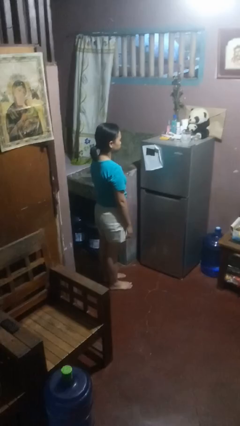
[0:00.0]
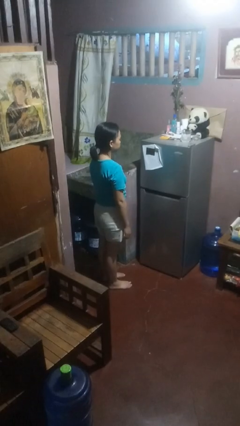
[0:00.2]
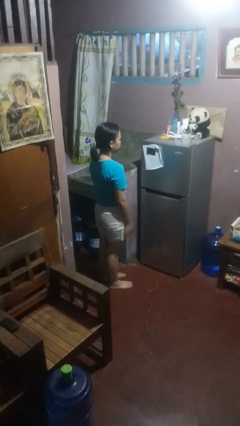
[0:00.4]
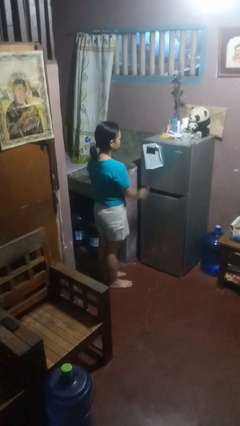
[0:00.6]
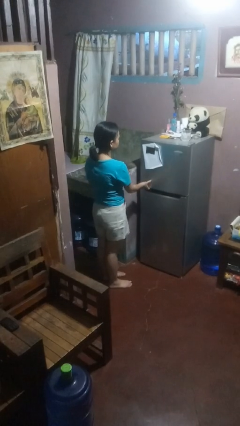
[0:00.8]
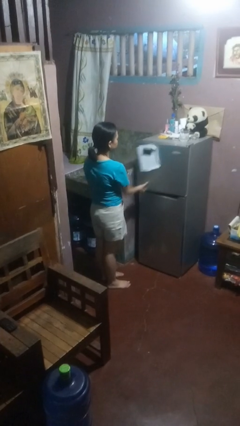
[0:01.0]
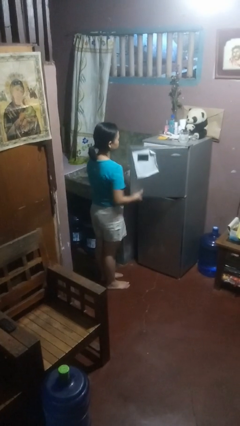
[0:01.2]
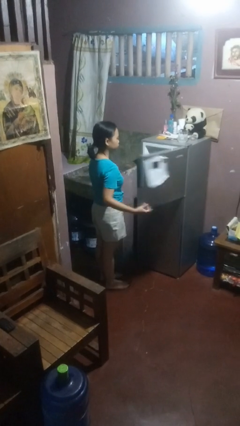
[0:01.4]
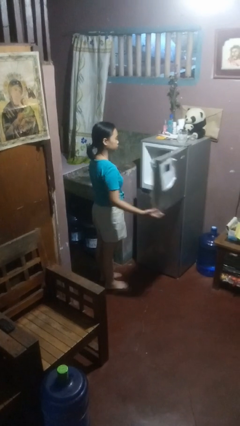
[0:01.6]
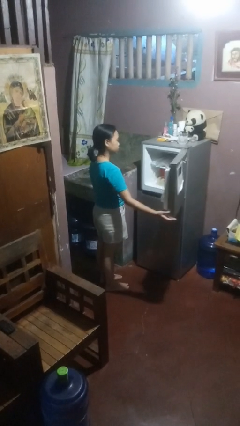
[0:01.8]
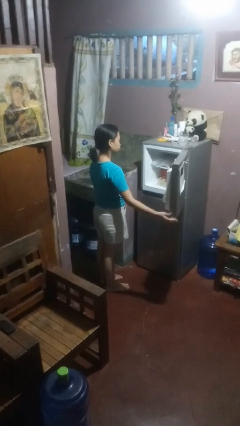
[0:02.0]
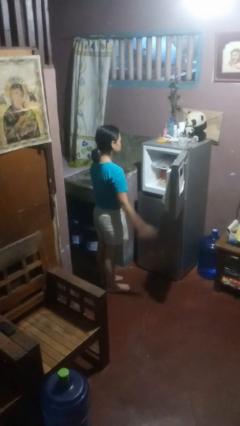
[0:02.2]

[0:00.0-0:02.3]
person opens refrigerator

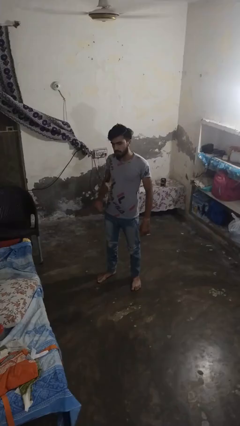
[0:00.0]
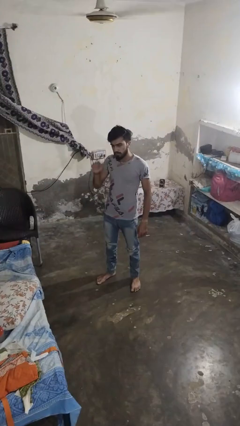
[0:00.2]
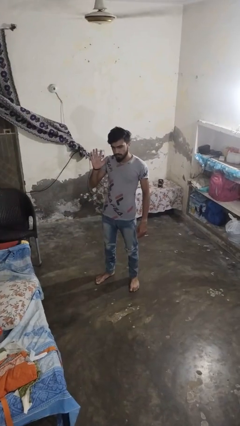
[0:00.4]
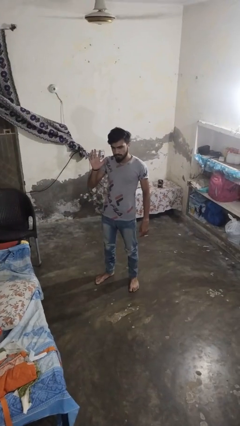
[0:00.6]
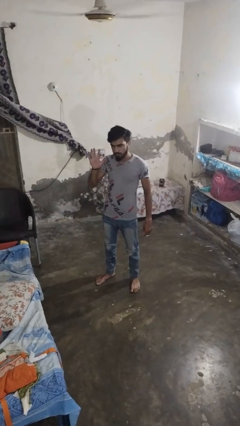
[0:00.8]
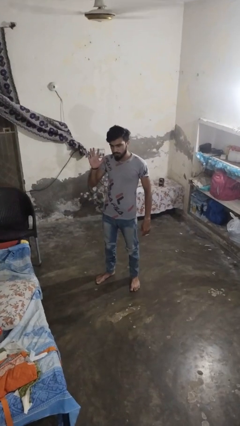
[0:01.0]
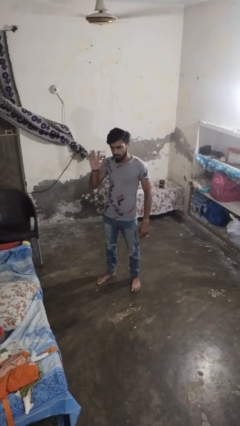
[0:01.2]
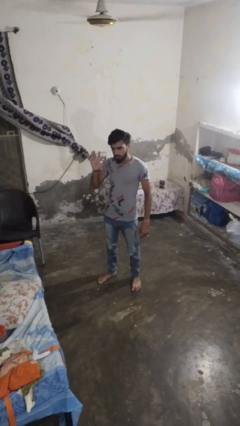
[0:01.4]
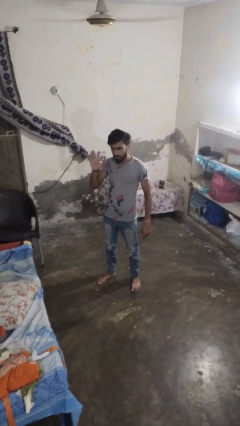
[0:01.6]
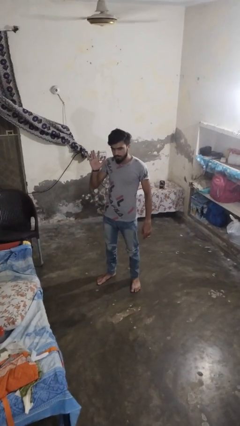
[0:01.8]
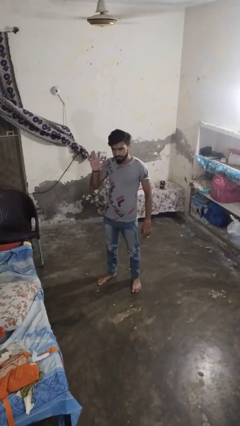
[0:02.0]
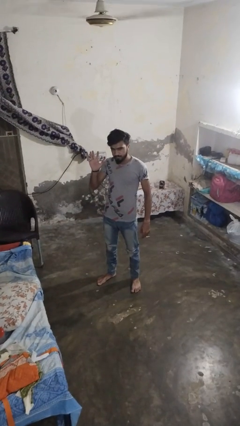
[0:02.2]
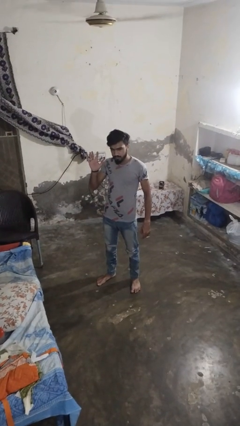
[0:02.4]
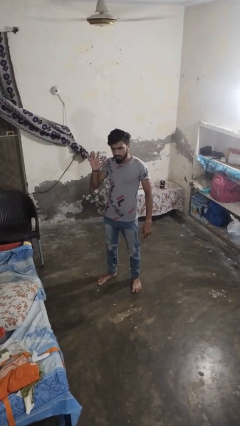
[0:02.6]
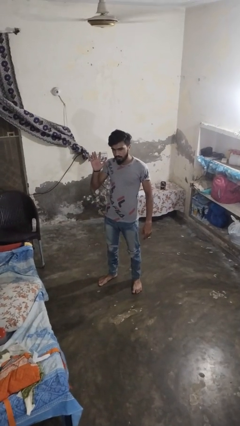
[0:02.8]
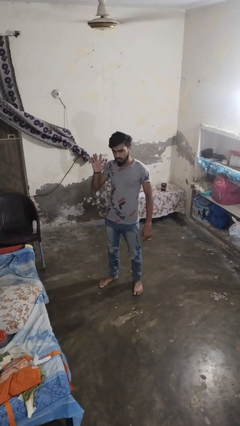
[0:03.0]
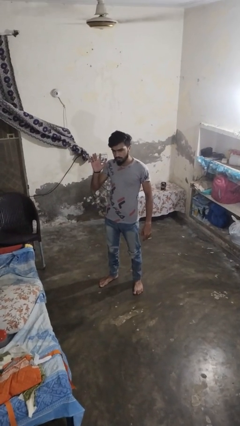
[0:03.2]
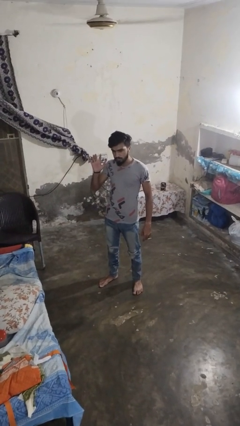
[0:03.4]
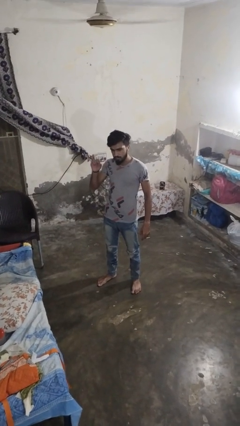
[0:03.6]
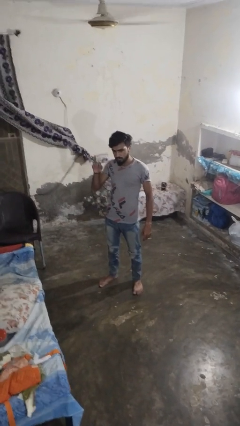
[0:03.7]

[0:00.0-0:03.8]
person gestures number five

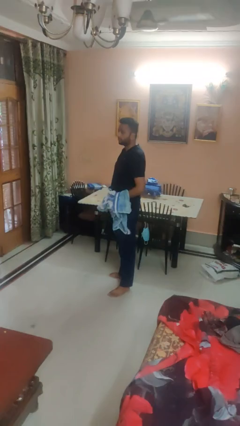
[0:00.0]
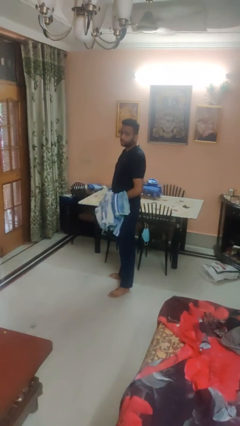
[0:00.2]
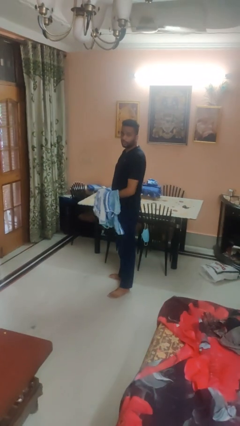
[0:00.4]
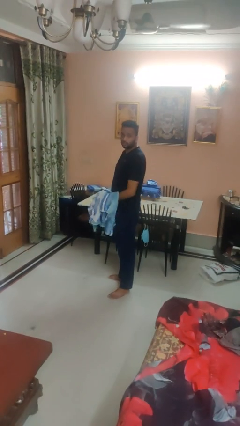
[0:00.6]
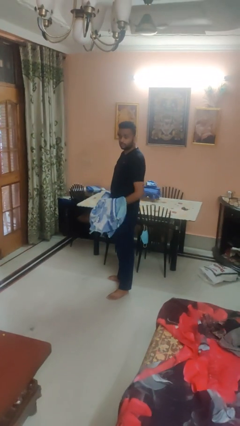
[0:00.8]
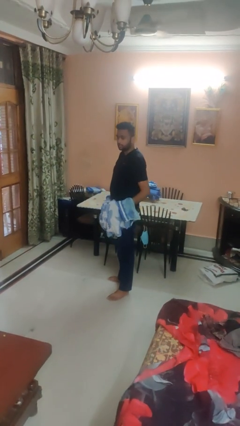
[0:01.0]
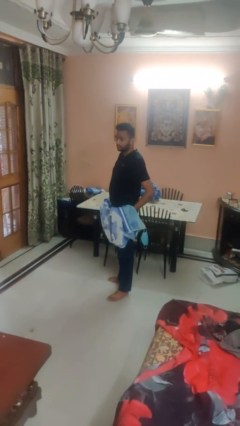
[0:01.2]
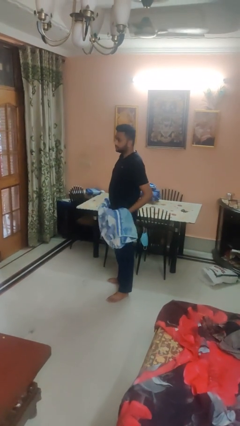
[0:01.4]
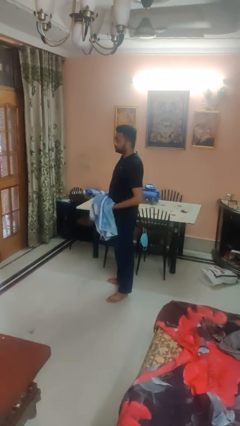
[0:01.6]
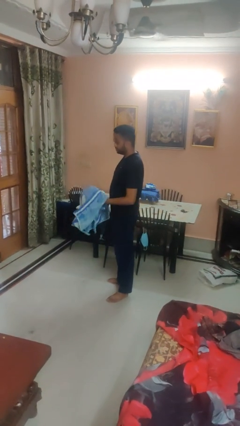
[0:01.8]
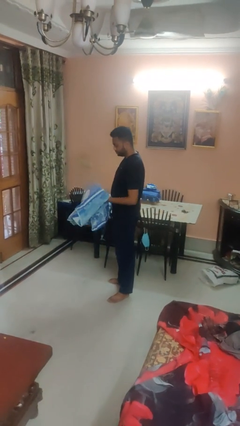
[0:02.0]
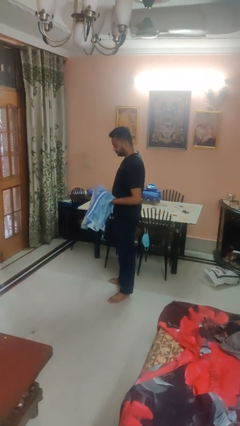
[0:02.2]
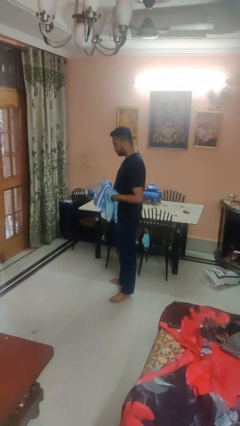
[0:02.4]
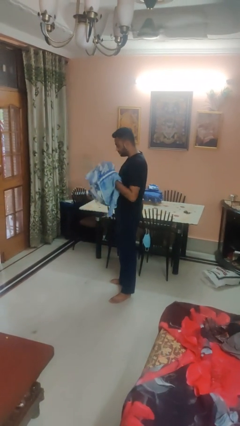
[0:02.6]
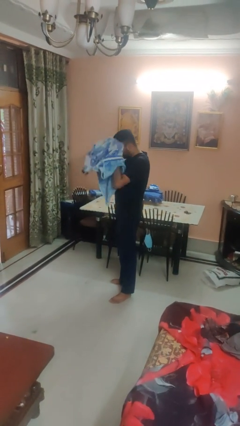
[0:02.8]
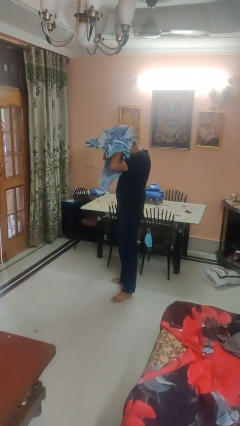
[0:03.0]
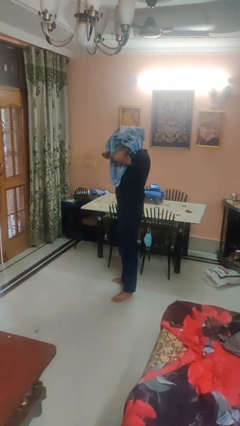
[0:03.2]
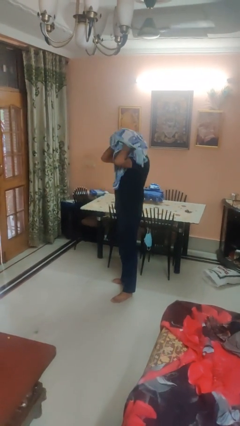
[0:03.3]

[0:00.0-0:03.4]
person dries hair with towel

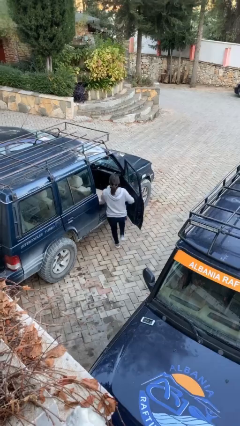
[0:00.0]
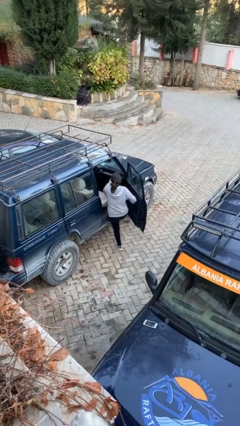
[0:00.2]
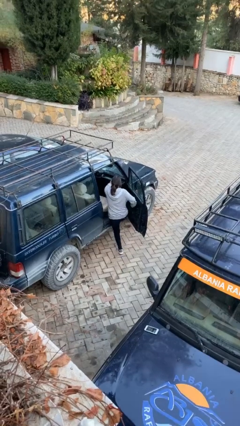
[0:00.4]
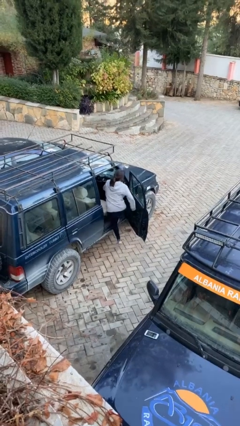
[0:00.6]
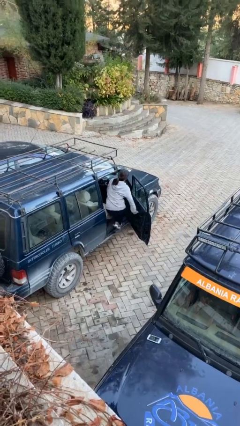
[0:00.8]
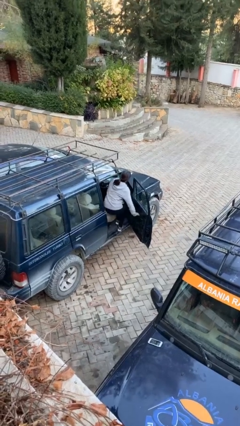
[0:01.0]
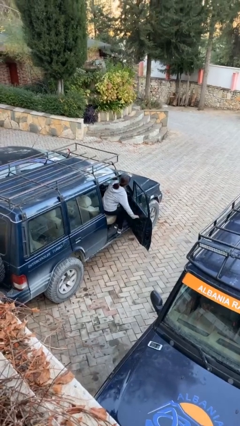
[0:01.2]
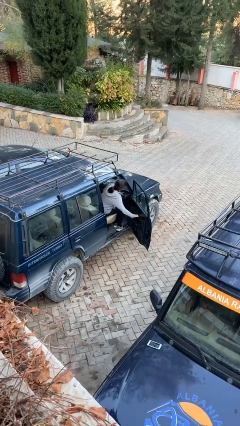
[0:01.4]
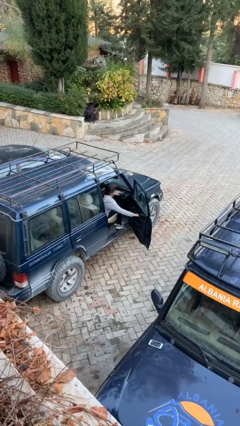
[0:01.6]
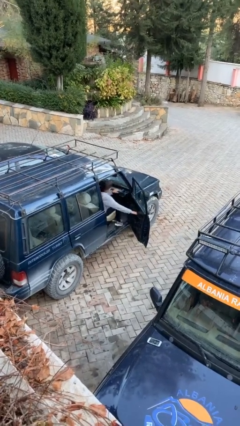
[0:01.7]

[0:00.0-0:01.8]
person enters car

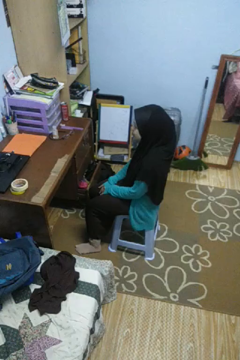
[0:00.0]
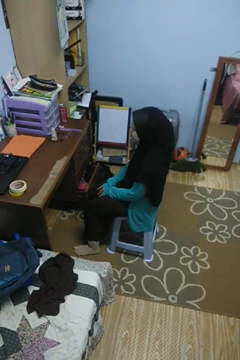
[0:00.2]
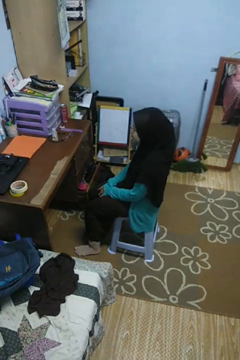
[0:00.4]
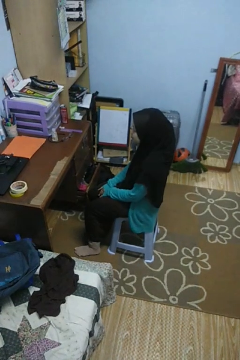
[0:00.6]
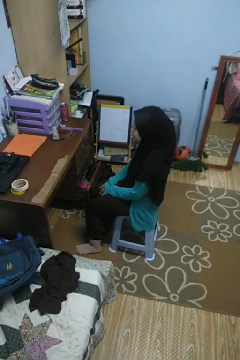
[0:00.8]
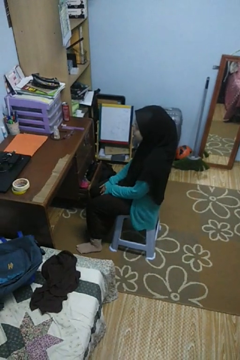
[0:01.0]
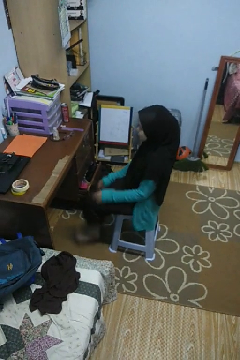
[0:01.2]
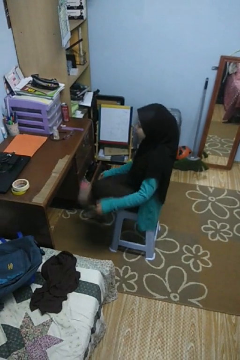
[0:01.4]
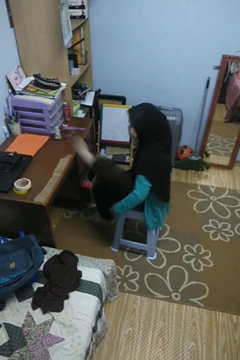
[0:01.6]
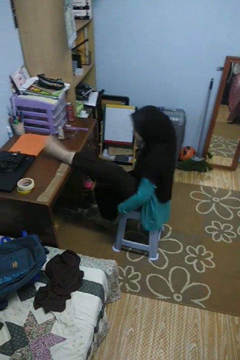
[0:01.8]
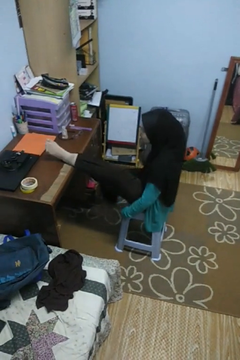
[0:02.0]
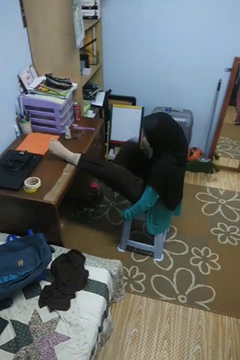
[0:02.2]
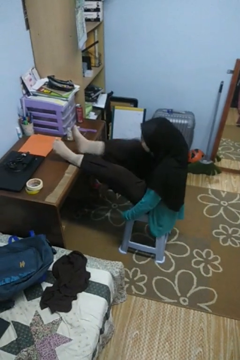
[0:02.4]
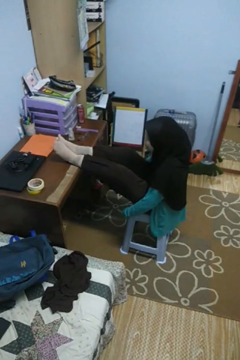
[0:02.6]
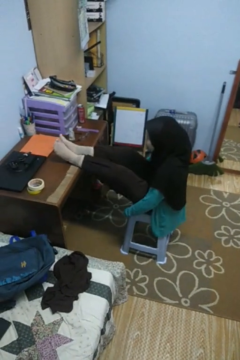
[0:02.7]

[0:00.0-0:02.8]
person puts feet up

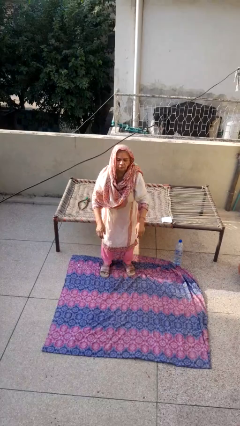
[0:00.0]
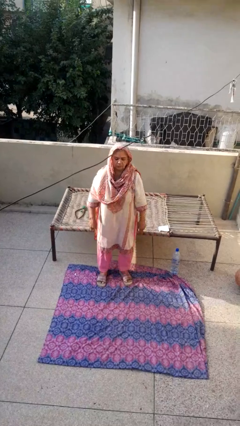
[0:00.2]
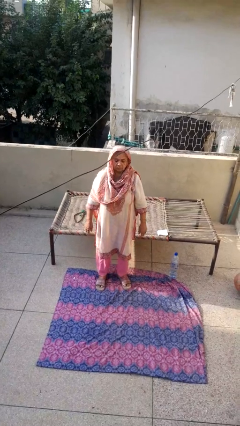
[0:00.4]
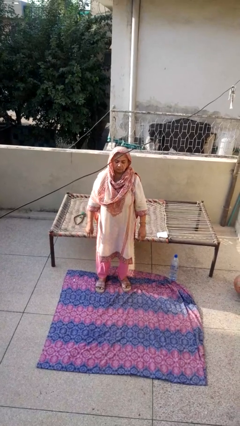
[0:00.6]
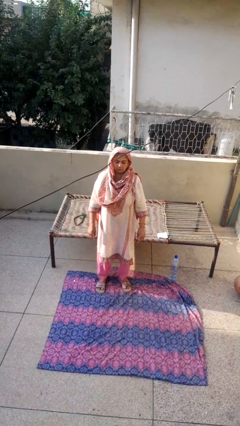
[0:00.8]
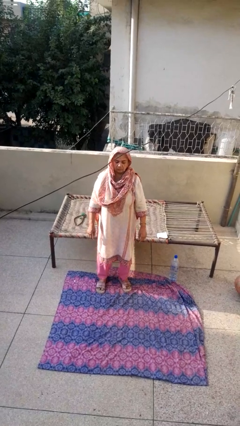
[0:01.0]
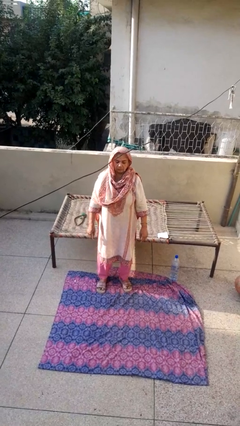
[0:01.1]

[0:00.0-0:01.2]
person stands up

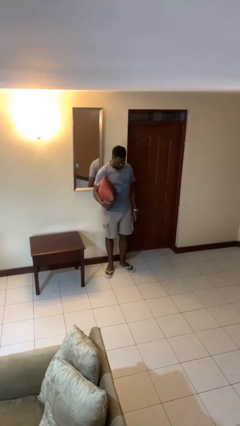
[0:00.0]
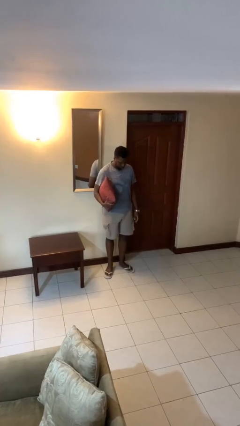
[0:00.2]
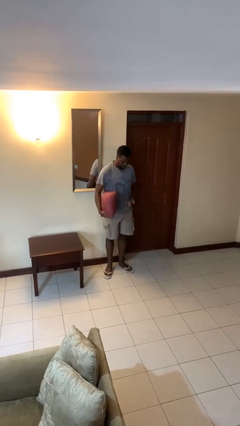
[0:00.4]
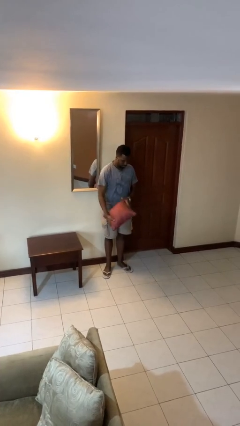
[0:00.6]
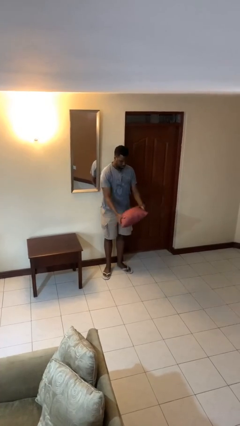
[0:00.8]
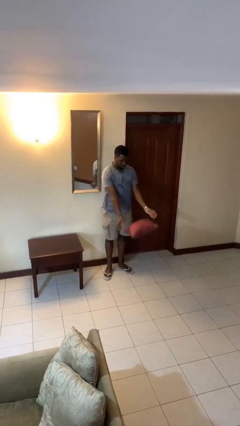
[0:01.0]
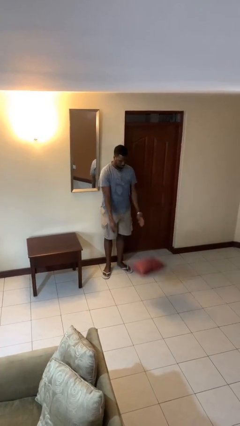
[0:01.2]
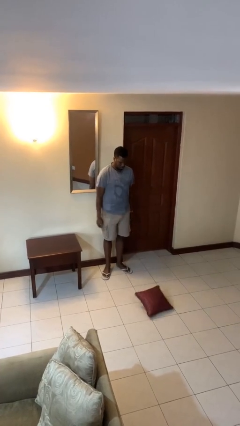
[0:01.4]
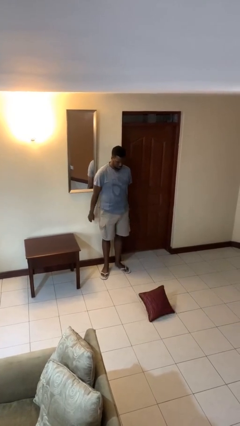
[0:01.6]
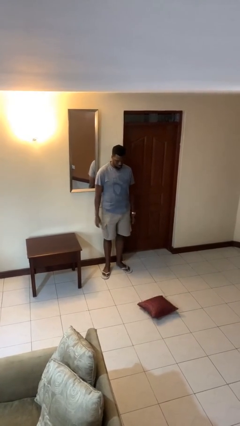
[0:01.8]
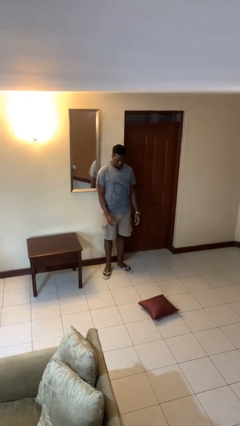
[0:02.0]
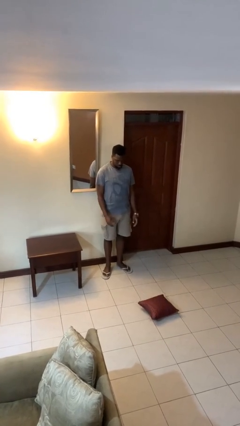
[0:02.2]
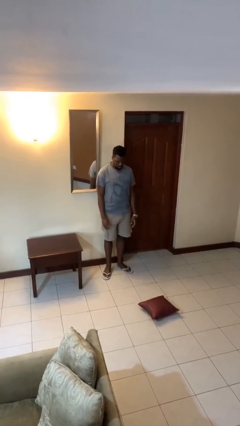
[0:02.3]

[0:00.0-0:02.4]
person throws object to ground
